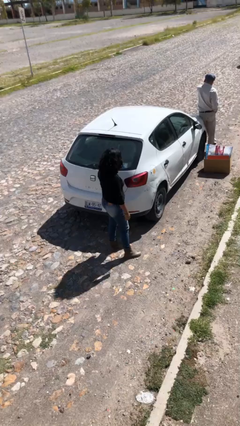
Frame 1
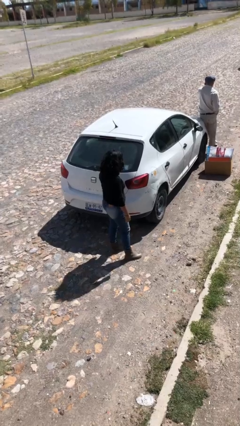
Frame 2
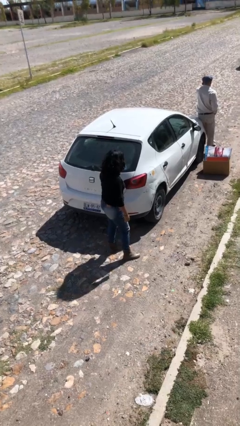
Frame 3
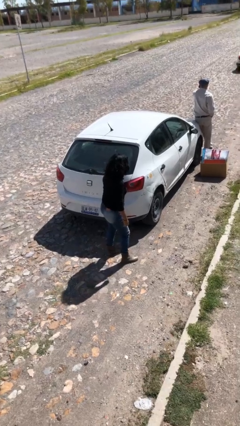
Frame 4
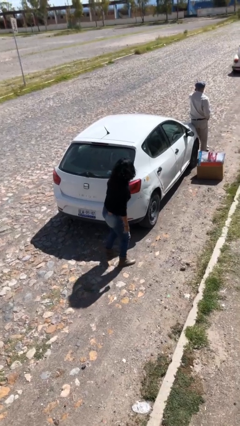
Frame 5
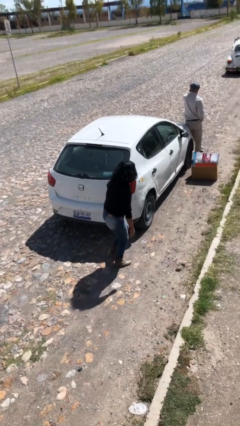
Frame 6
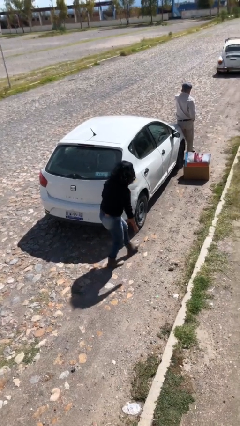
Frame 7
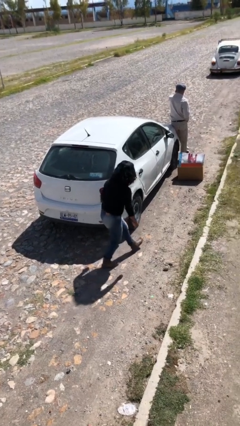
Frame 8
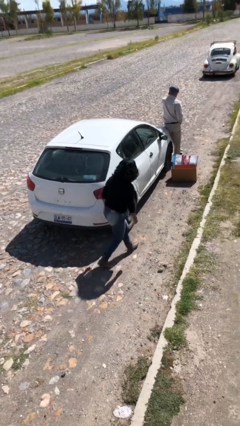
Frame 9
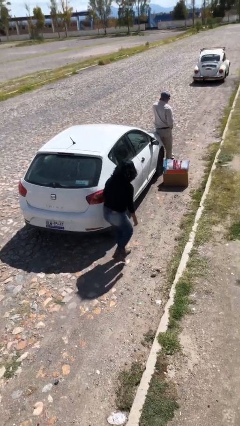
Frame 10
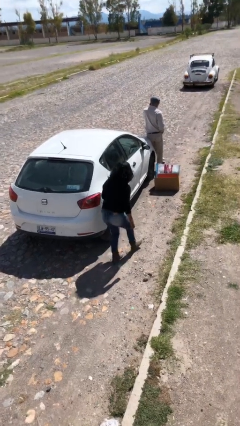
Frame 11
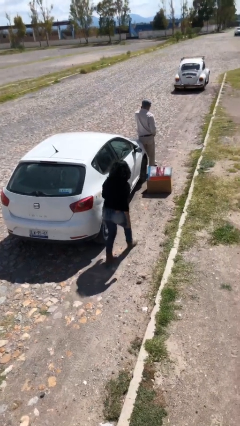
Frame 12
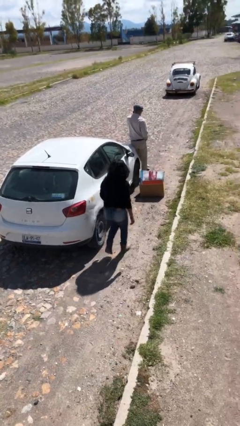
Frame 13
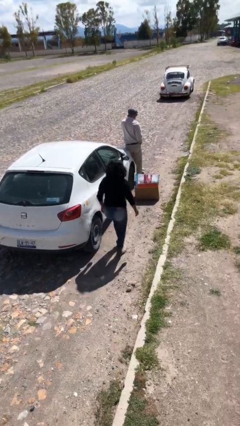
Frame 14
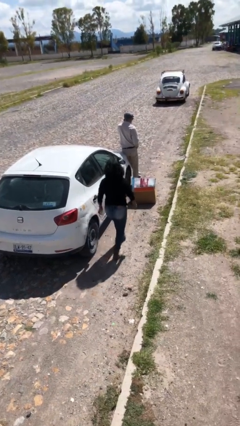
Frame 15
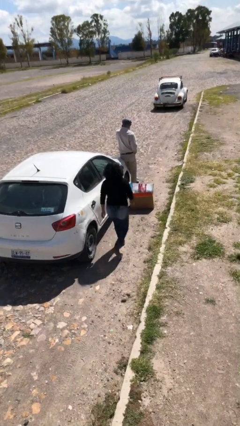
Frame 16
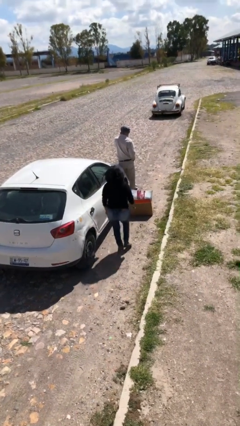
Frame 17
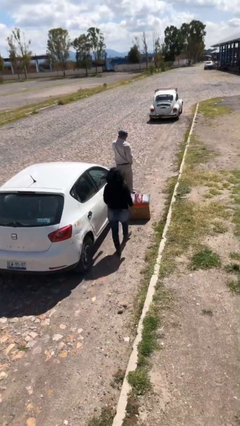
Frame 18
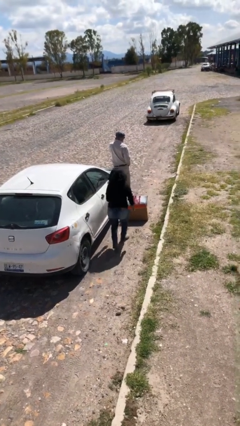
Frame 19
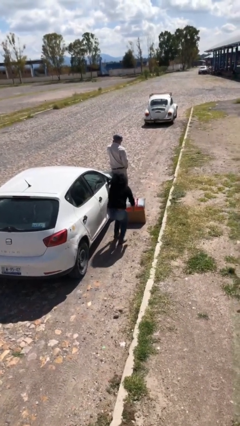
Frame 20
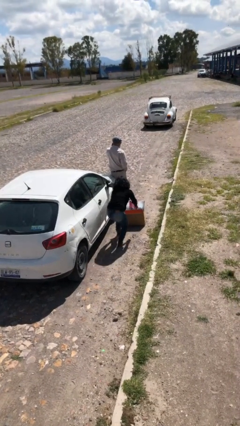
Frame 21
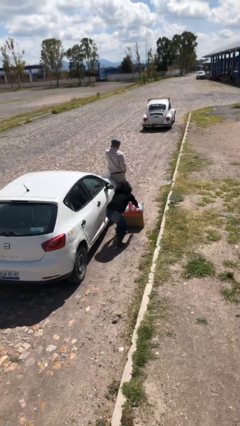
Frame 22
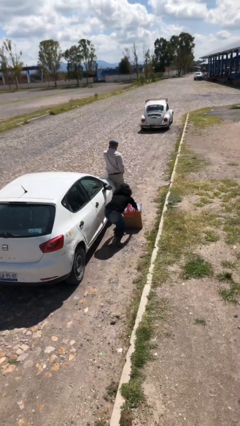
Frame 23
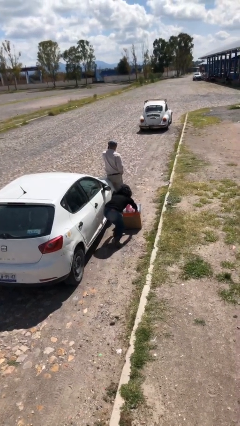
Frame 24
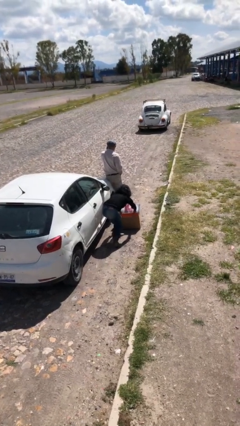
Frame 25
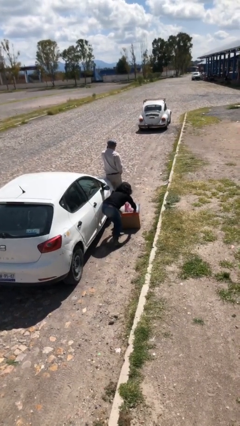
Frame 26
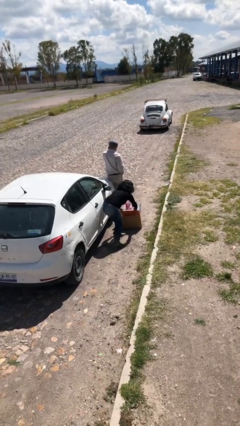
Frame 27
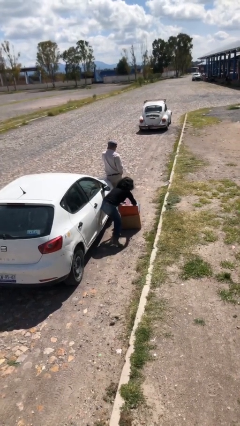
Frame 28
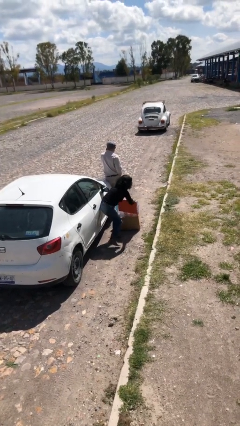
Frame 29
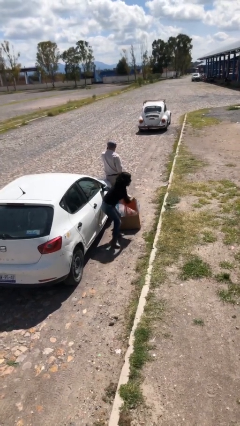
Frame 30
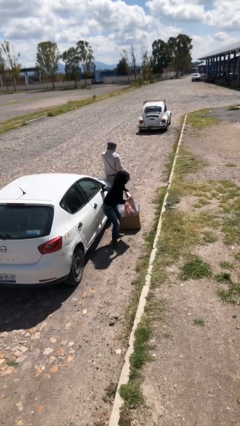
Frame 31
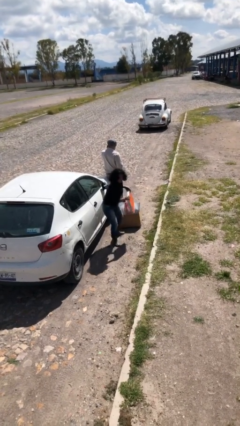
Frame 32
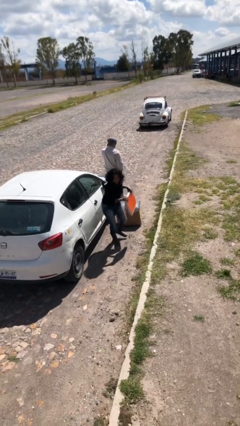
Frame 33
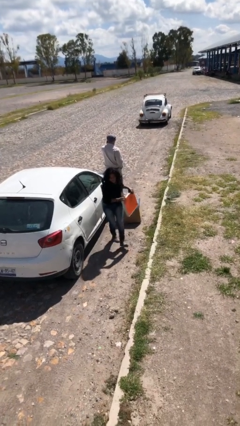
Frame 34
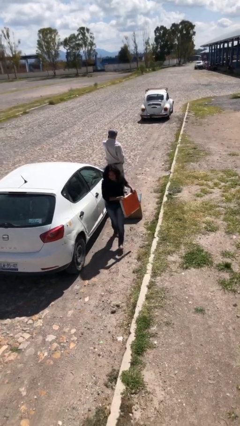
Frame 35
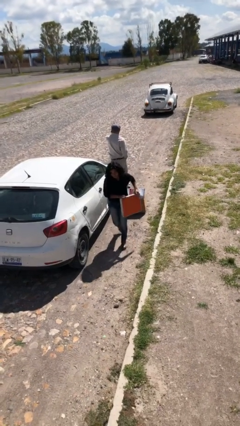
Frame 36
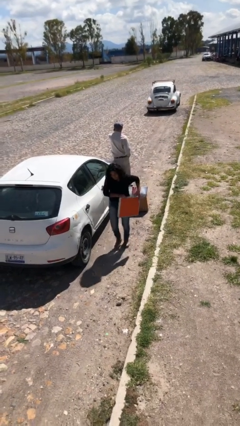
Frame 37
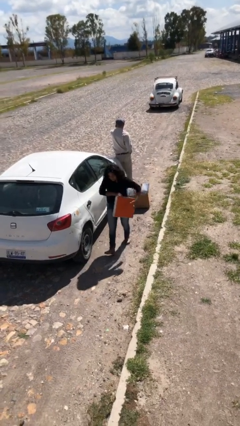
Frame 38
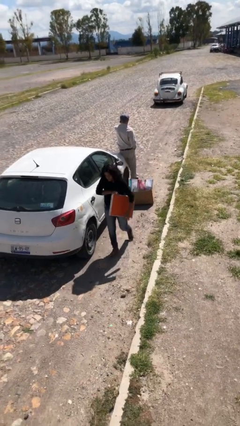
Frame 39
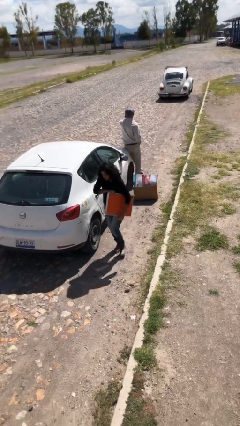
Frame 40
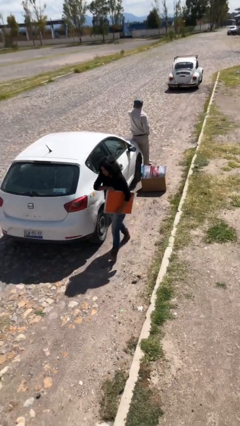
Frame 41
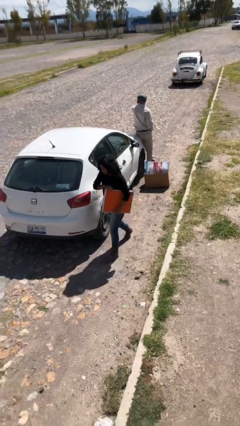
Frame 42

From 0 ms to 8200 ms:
person steals object from person

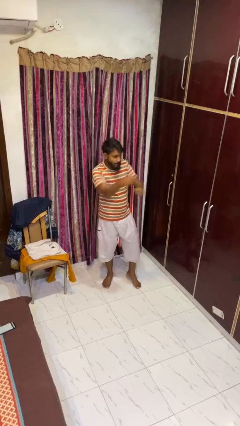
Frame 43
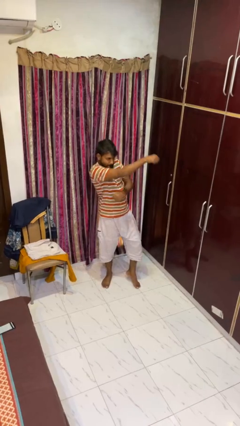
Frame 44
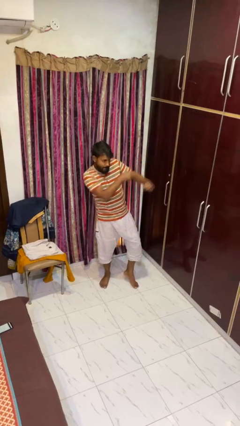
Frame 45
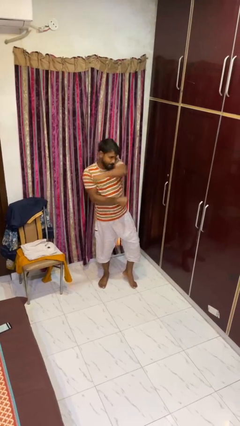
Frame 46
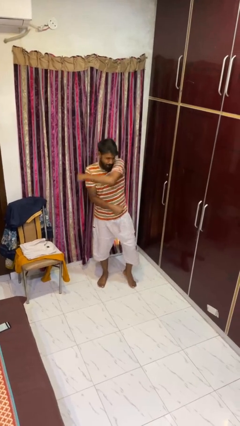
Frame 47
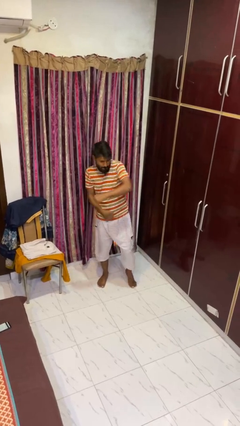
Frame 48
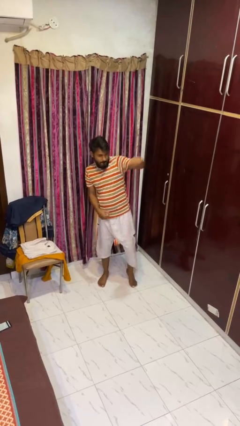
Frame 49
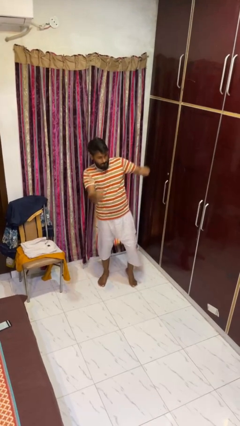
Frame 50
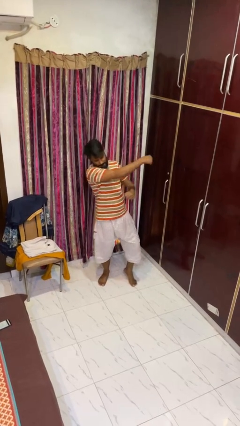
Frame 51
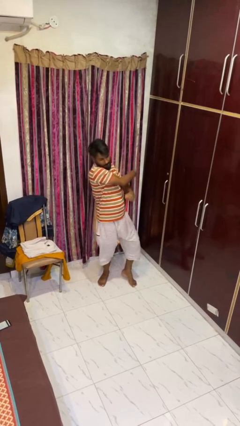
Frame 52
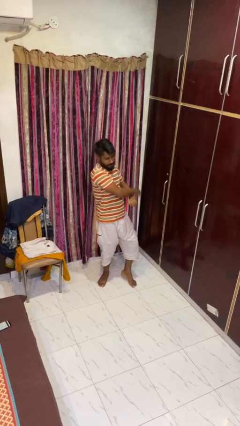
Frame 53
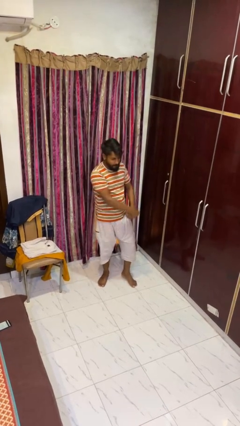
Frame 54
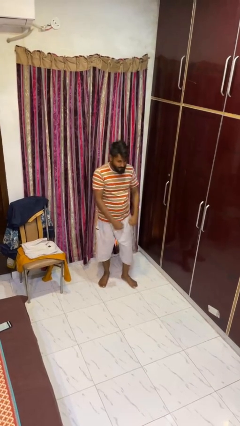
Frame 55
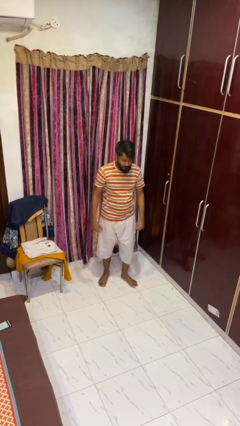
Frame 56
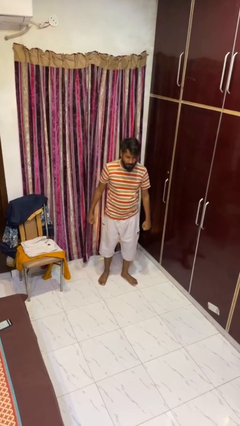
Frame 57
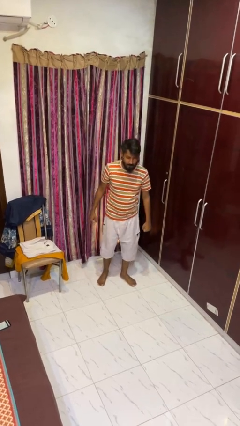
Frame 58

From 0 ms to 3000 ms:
person punches

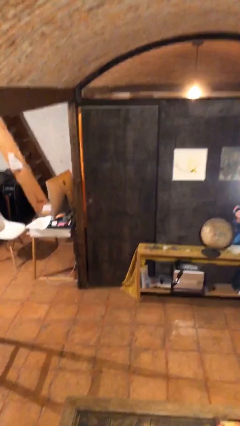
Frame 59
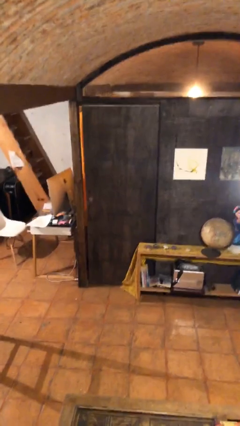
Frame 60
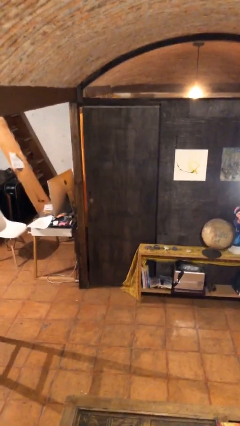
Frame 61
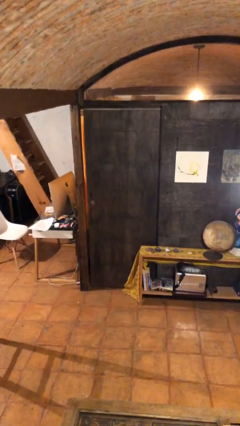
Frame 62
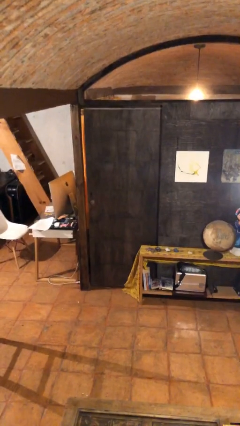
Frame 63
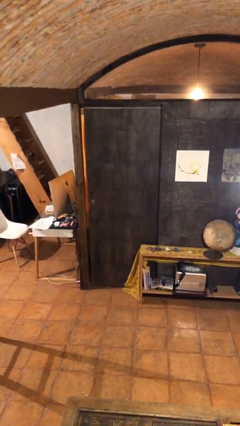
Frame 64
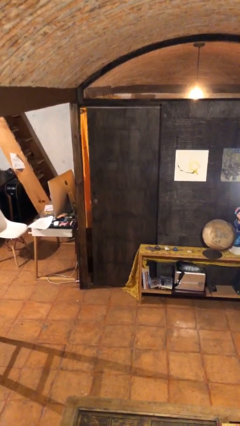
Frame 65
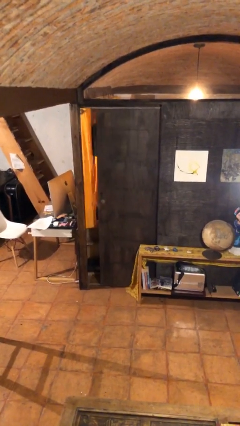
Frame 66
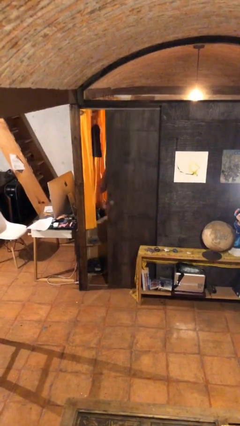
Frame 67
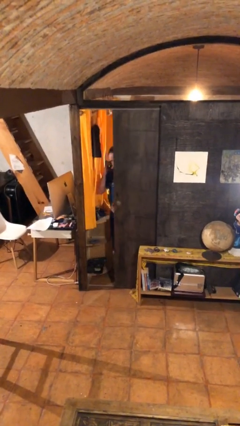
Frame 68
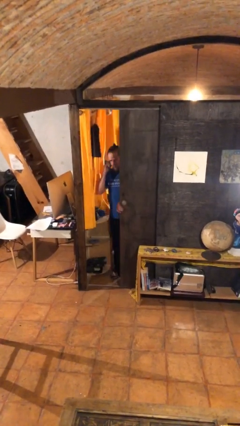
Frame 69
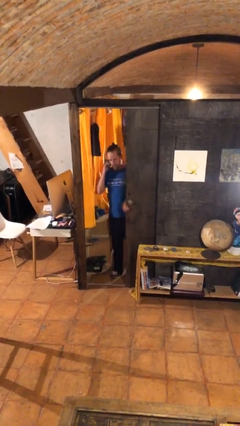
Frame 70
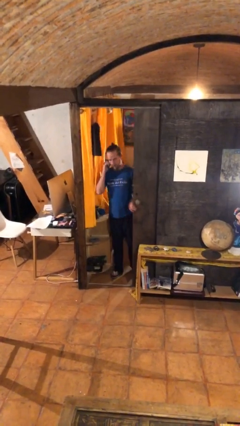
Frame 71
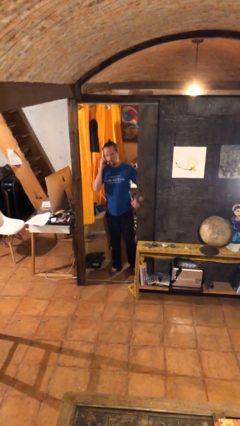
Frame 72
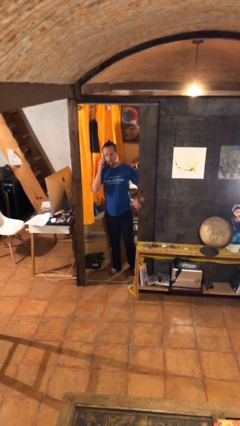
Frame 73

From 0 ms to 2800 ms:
person opens facility door

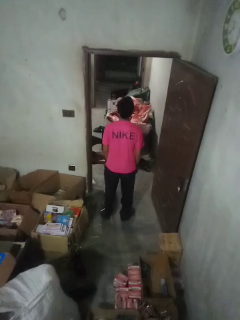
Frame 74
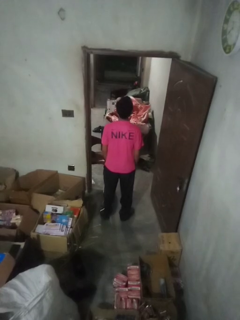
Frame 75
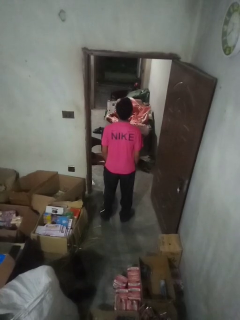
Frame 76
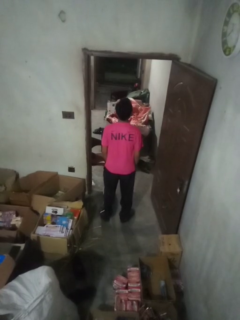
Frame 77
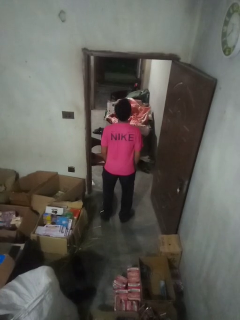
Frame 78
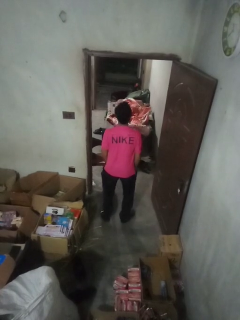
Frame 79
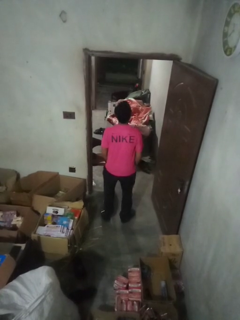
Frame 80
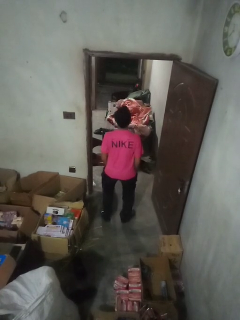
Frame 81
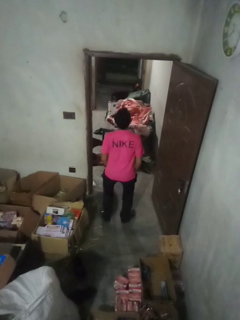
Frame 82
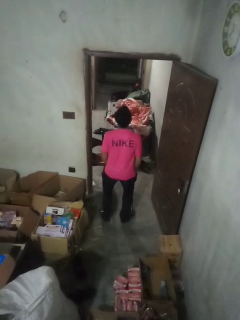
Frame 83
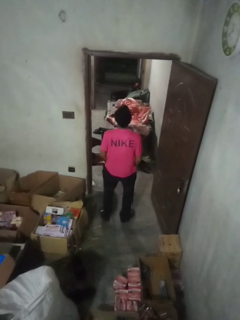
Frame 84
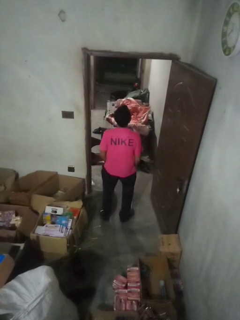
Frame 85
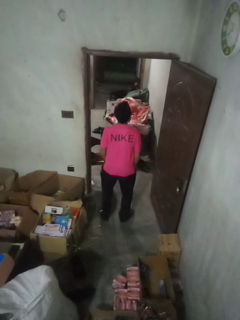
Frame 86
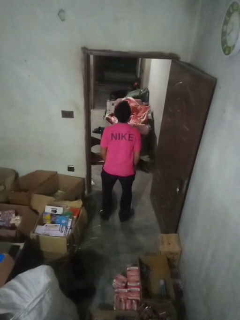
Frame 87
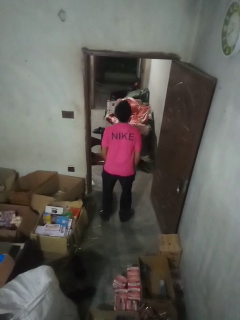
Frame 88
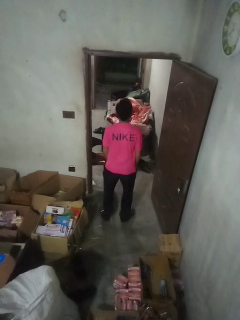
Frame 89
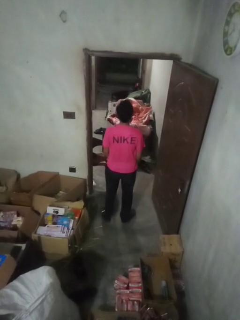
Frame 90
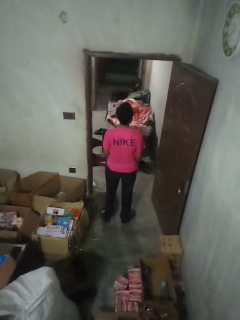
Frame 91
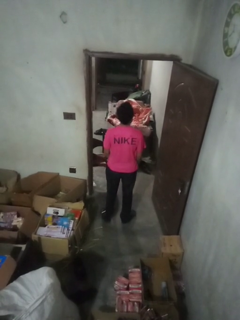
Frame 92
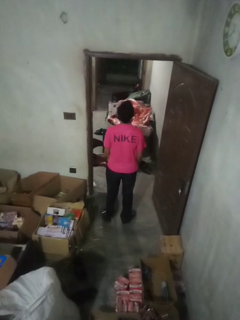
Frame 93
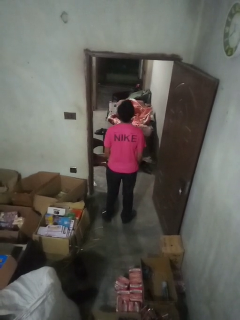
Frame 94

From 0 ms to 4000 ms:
person wiggles hips

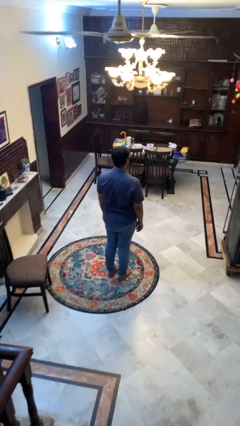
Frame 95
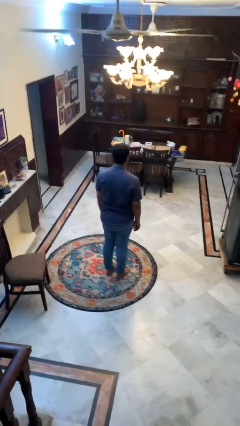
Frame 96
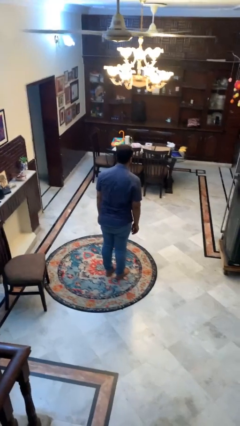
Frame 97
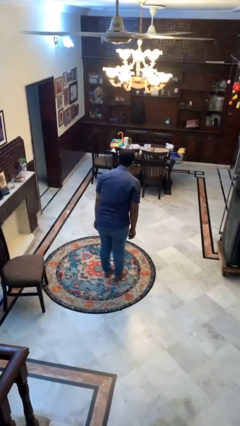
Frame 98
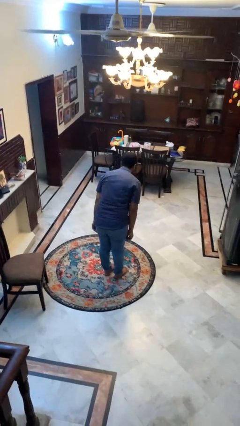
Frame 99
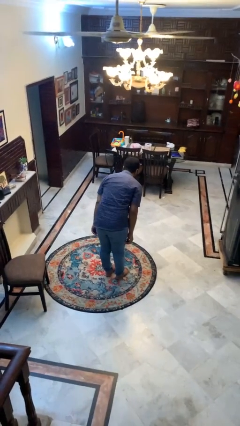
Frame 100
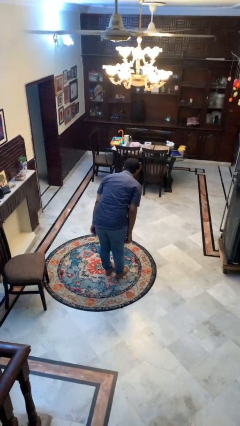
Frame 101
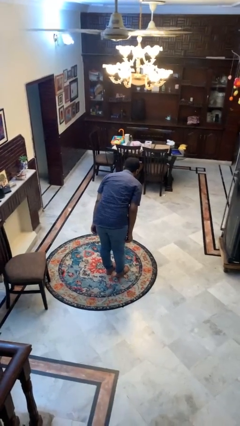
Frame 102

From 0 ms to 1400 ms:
person bows
